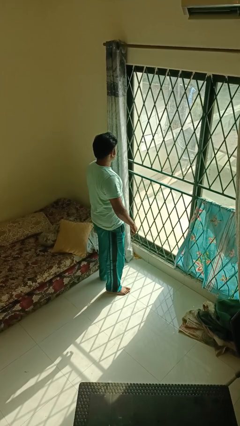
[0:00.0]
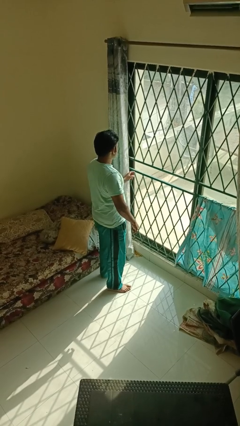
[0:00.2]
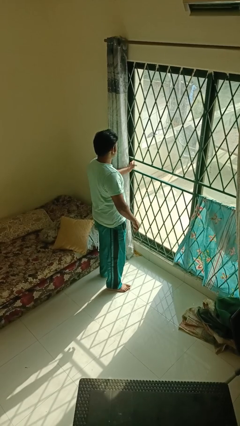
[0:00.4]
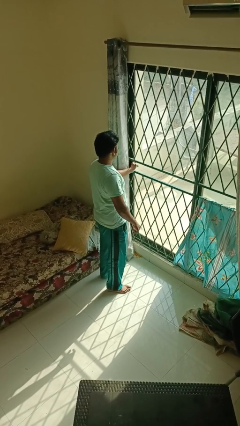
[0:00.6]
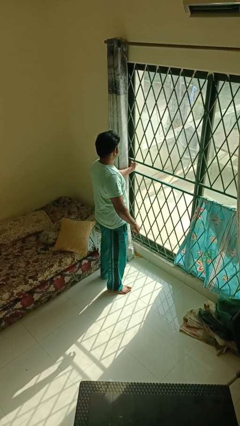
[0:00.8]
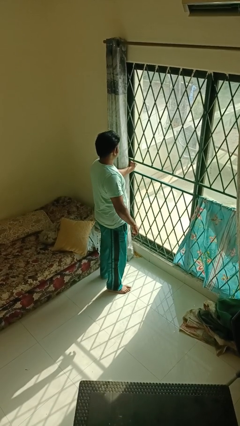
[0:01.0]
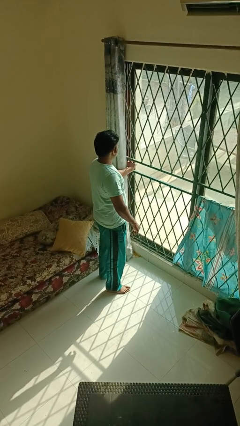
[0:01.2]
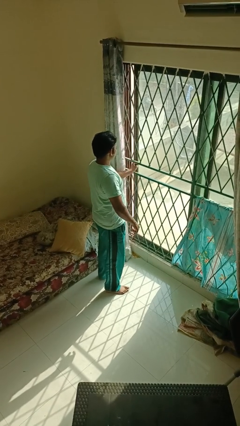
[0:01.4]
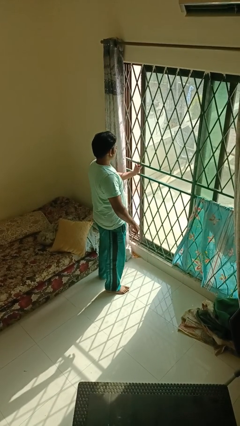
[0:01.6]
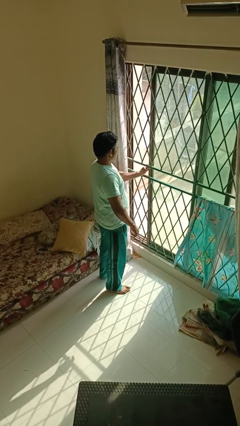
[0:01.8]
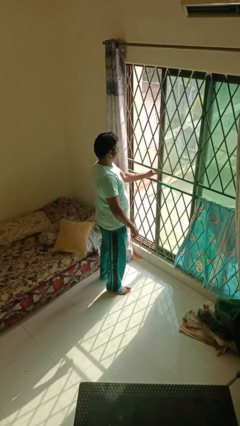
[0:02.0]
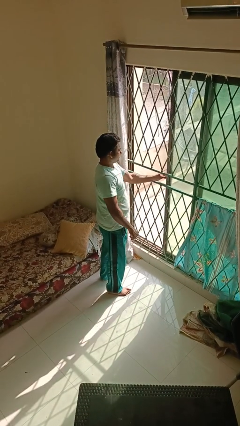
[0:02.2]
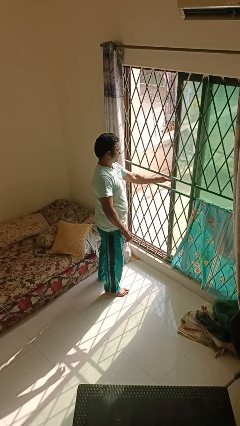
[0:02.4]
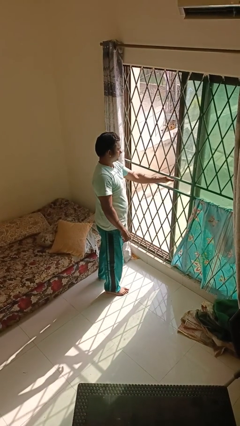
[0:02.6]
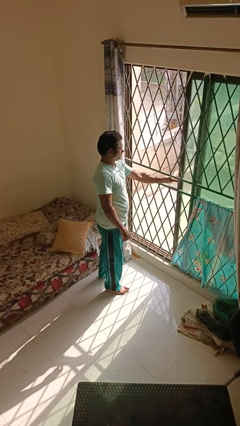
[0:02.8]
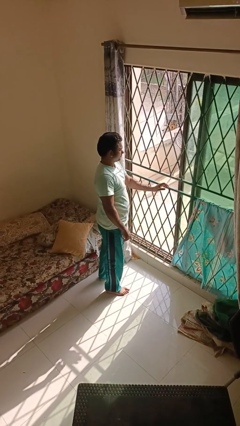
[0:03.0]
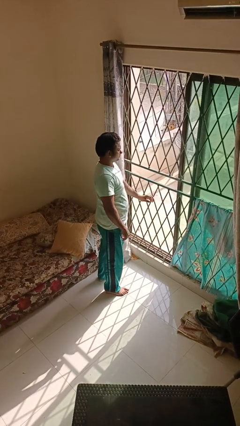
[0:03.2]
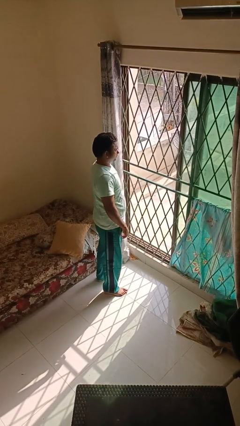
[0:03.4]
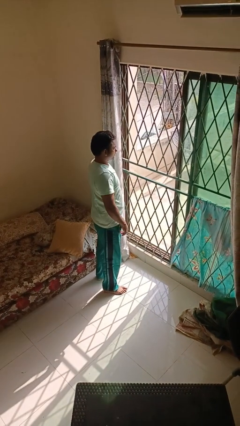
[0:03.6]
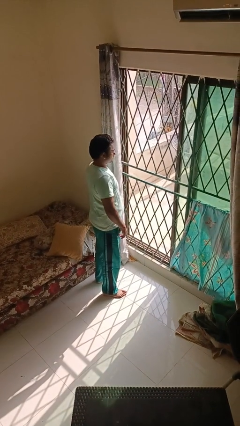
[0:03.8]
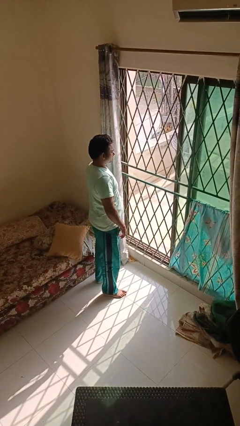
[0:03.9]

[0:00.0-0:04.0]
person opens home window

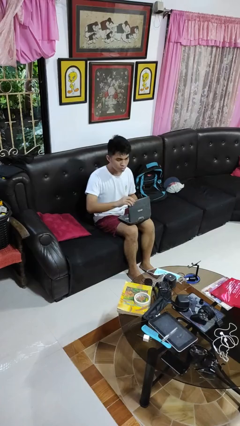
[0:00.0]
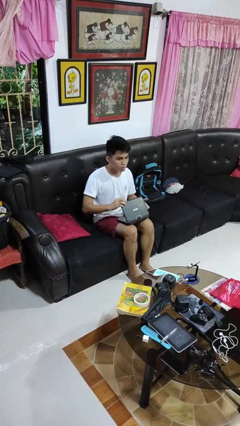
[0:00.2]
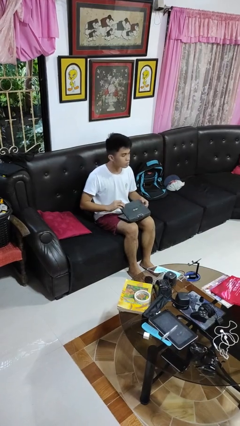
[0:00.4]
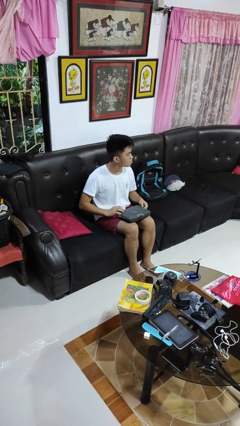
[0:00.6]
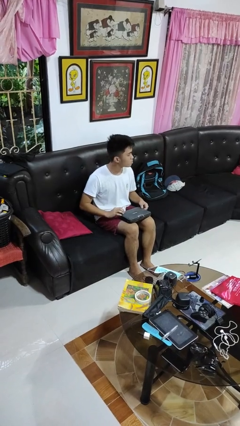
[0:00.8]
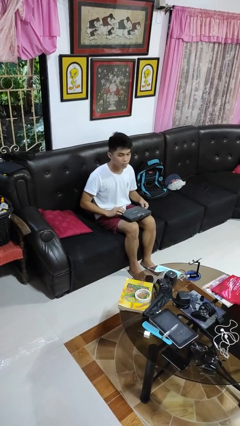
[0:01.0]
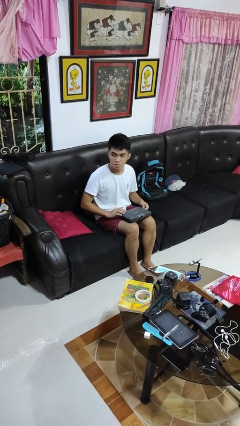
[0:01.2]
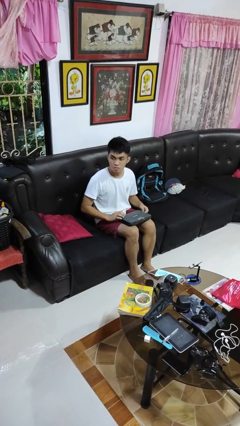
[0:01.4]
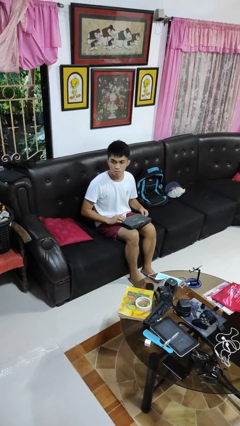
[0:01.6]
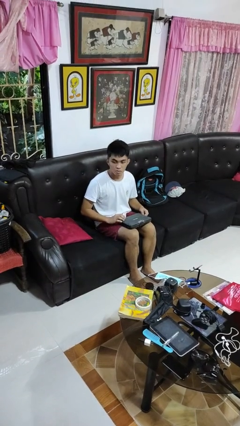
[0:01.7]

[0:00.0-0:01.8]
person closes laptop

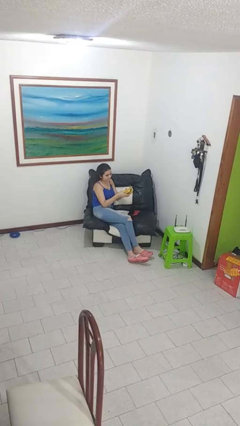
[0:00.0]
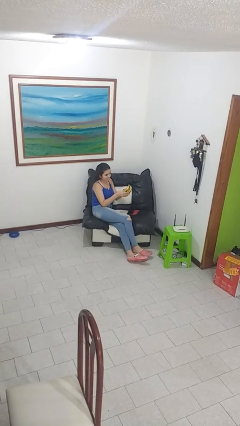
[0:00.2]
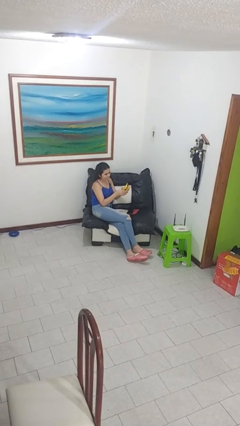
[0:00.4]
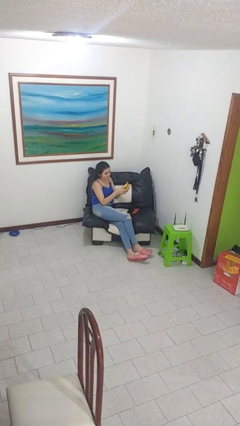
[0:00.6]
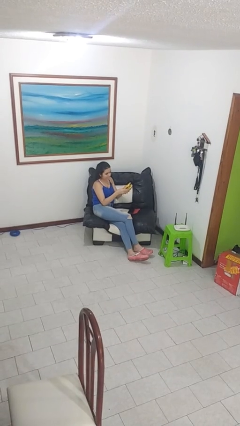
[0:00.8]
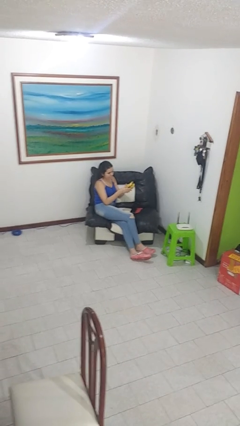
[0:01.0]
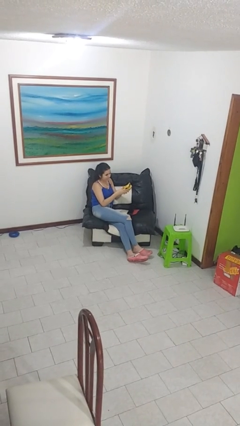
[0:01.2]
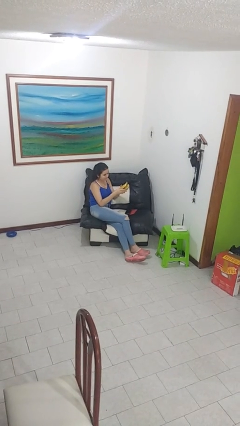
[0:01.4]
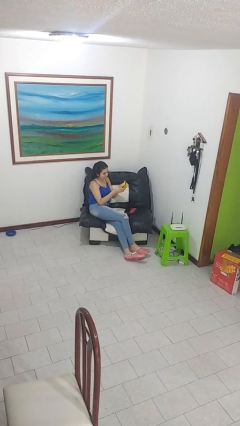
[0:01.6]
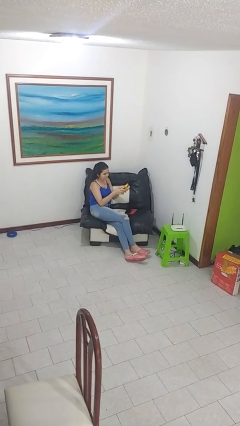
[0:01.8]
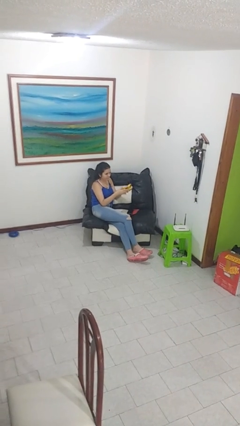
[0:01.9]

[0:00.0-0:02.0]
person taps object with finger

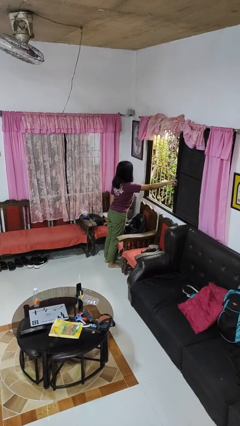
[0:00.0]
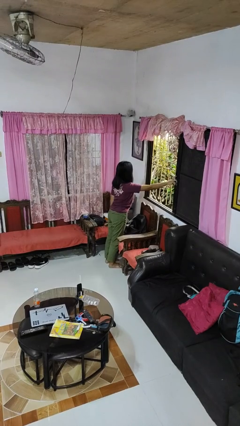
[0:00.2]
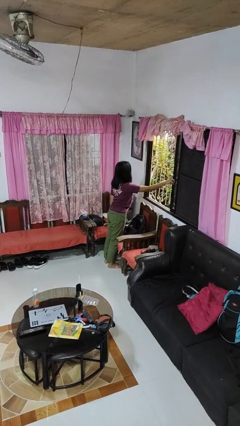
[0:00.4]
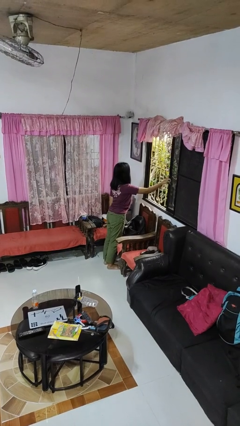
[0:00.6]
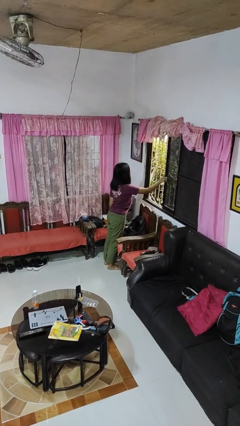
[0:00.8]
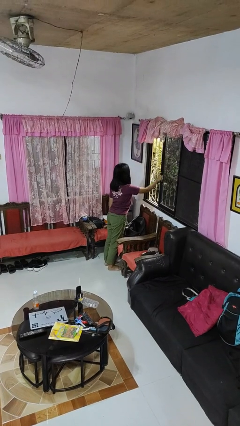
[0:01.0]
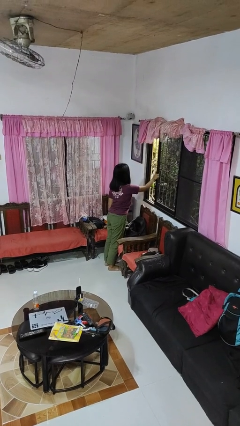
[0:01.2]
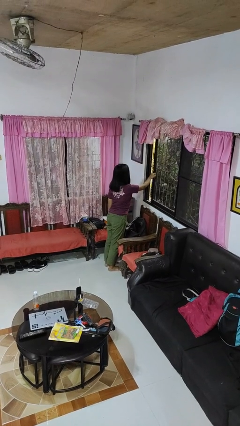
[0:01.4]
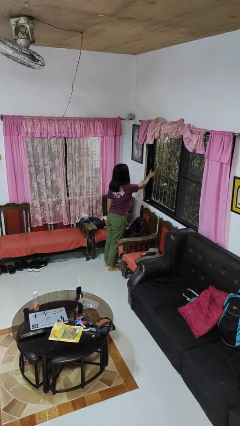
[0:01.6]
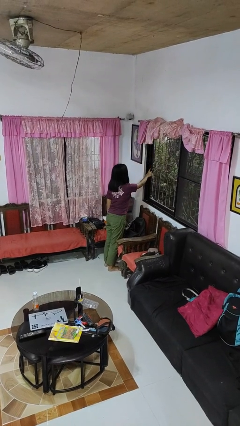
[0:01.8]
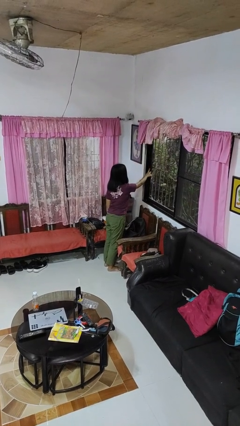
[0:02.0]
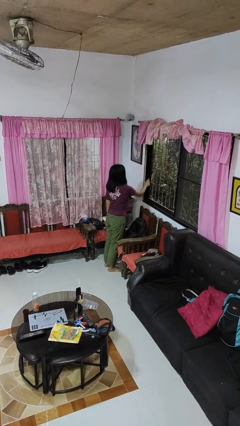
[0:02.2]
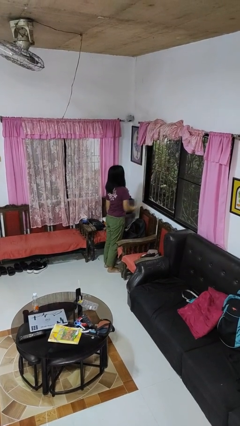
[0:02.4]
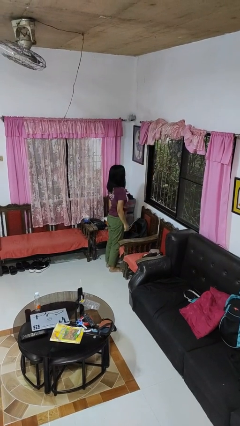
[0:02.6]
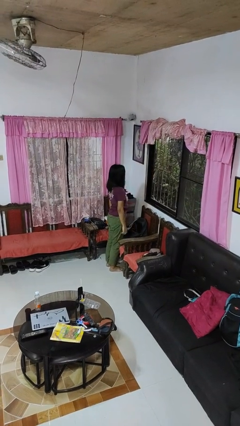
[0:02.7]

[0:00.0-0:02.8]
person closes home window

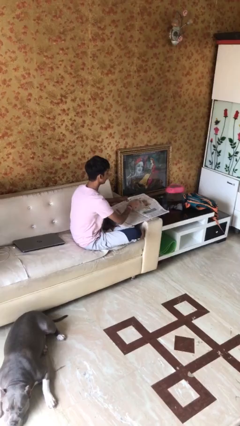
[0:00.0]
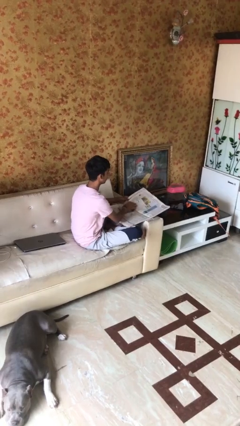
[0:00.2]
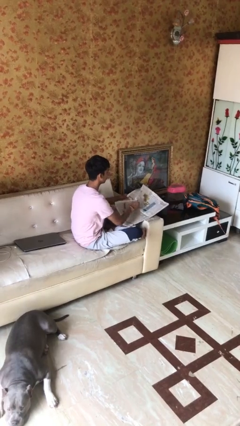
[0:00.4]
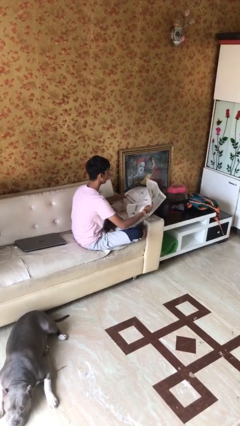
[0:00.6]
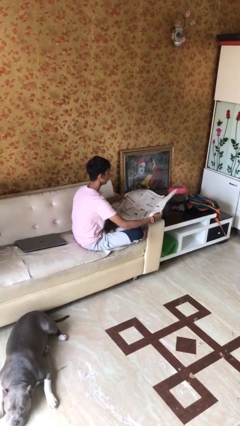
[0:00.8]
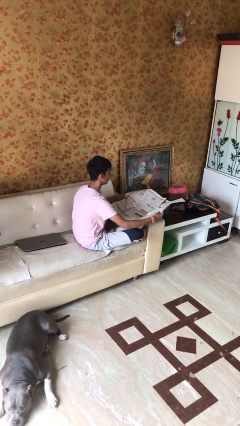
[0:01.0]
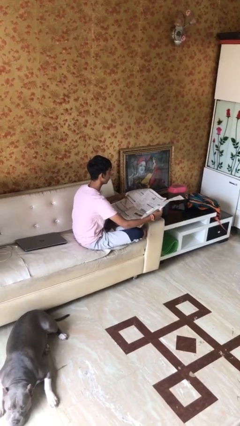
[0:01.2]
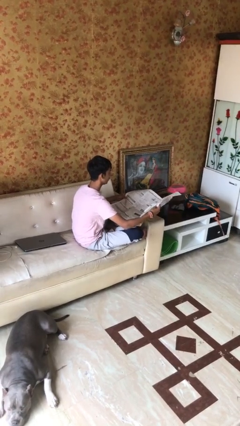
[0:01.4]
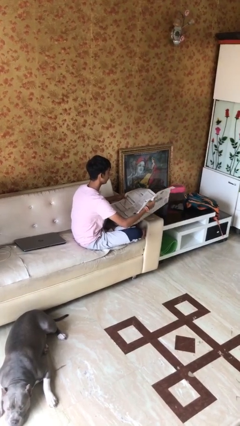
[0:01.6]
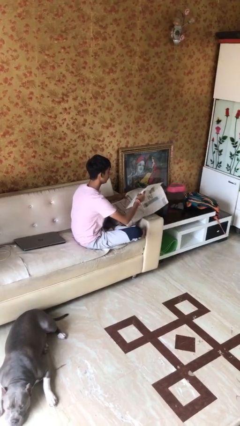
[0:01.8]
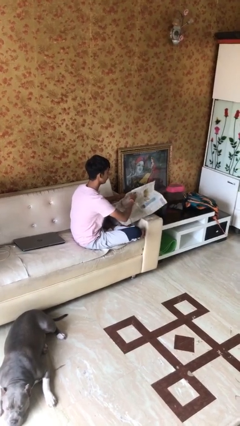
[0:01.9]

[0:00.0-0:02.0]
person reads newspaper

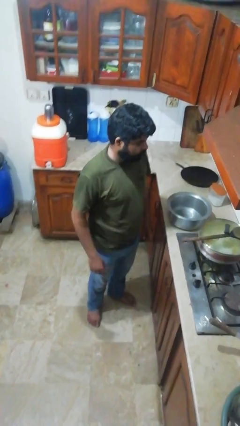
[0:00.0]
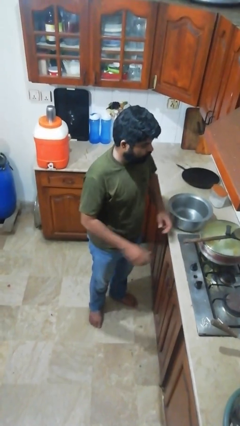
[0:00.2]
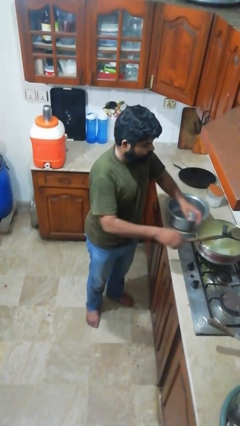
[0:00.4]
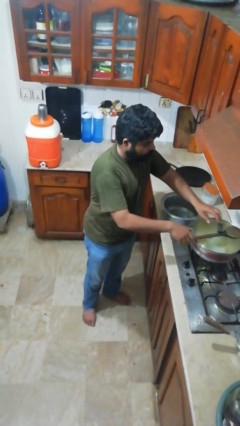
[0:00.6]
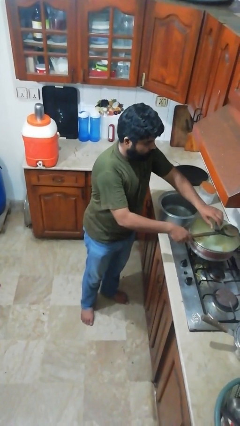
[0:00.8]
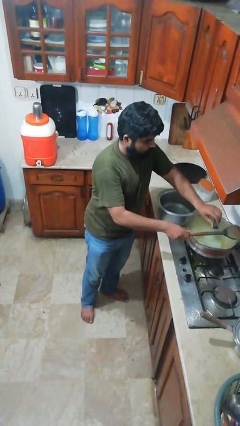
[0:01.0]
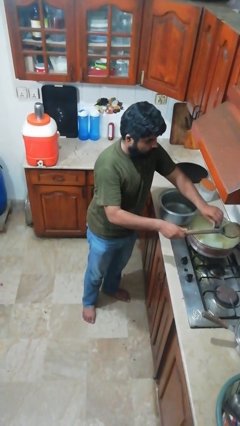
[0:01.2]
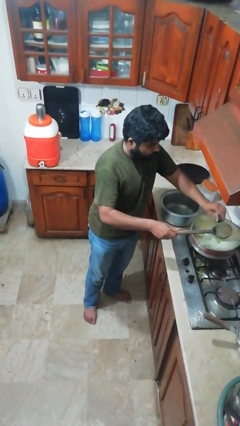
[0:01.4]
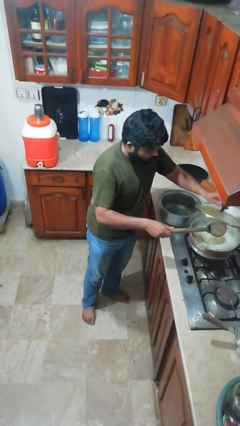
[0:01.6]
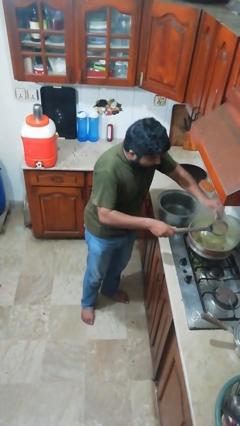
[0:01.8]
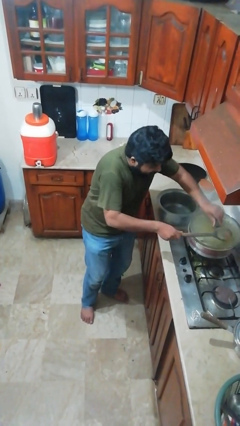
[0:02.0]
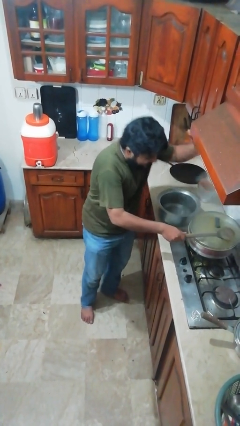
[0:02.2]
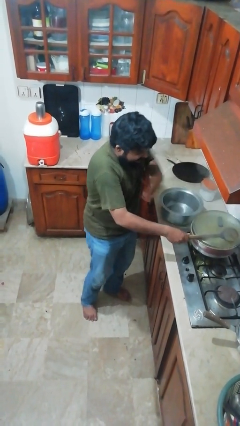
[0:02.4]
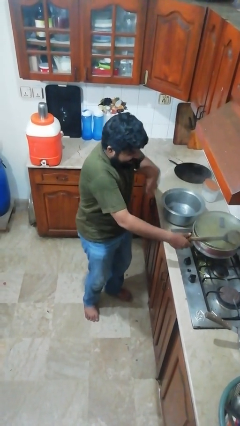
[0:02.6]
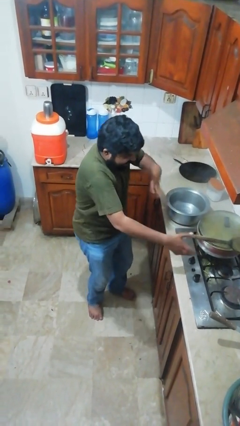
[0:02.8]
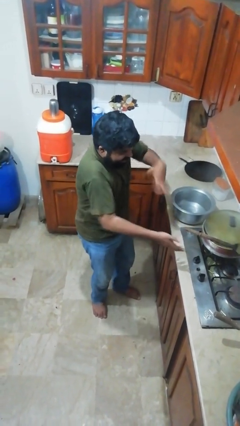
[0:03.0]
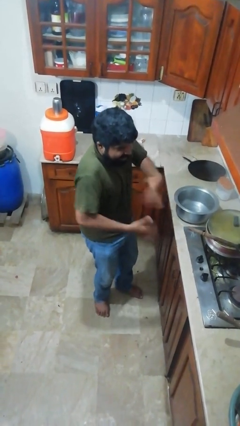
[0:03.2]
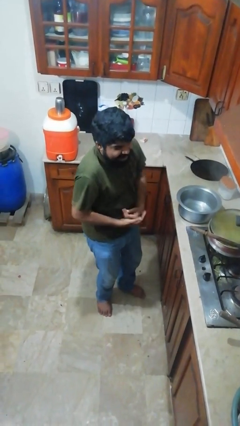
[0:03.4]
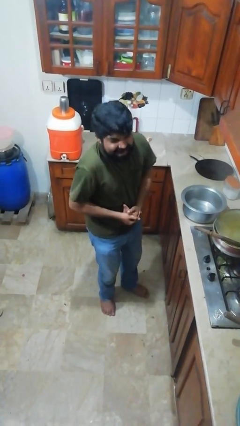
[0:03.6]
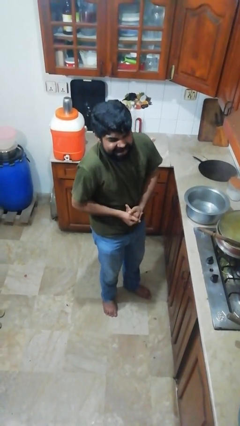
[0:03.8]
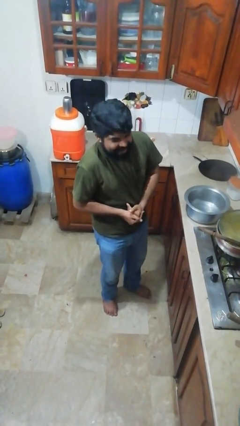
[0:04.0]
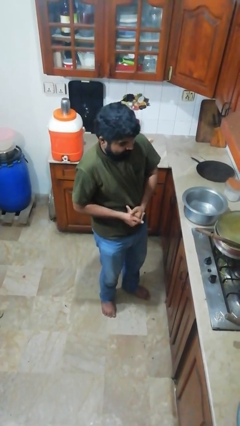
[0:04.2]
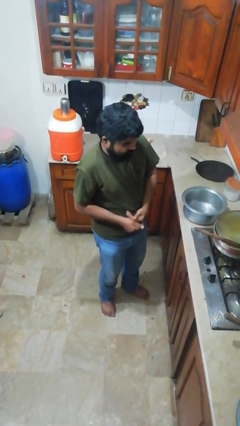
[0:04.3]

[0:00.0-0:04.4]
person burns hand

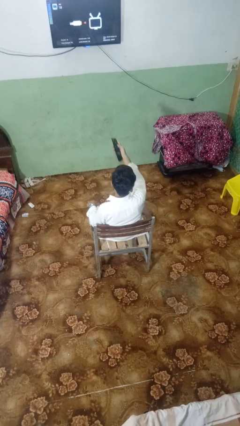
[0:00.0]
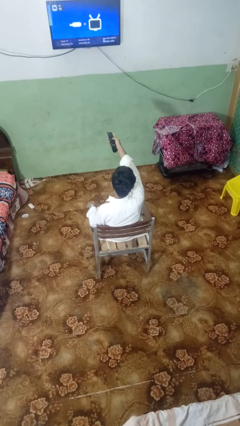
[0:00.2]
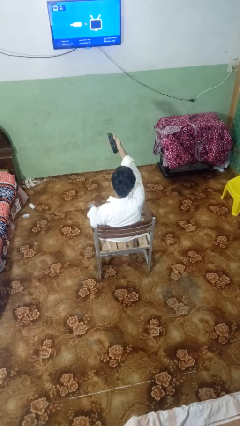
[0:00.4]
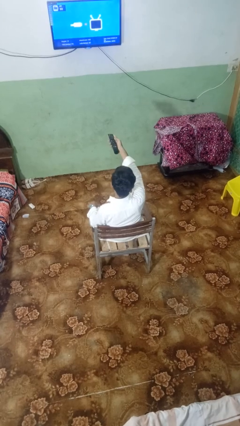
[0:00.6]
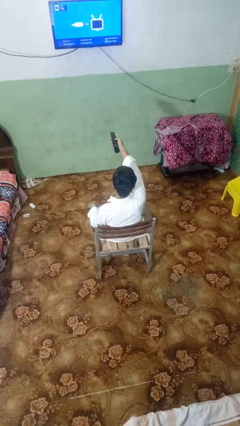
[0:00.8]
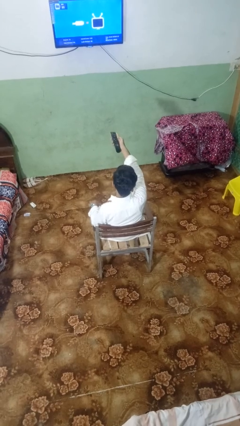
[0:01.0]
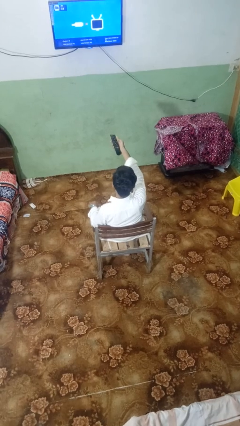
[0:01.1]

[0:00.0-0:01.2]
person uses television remote
